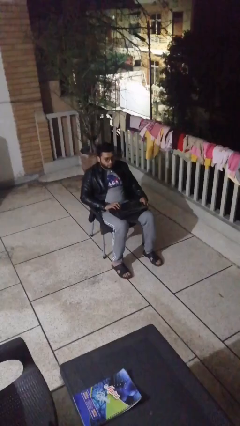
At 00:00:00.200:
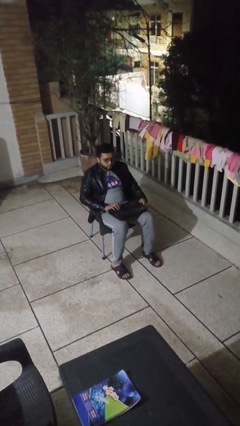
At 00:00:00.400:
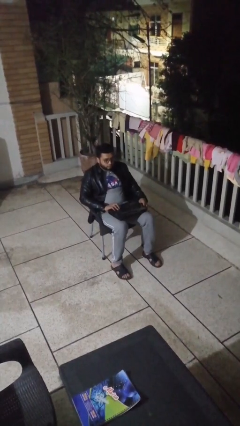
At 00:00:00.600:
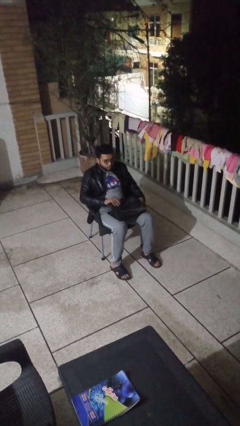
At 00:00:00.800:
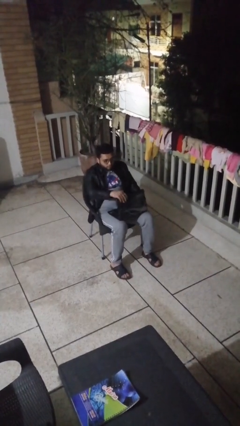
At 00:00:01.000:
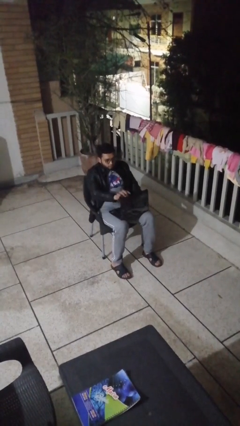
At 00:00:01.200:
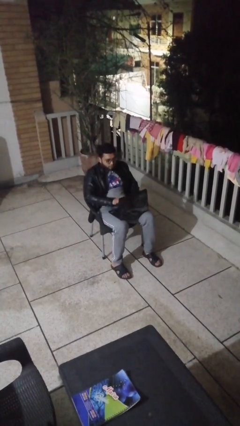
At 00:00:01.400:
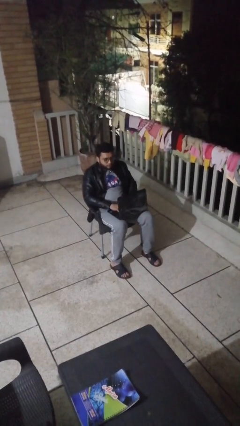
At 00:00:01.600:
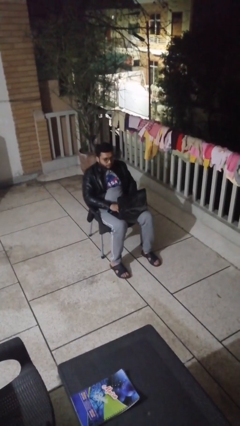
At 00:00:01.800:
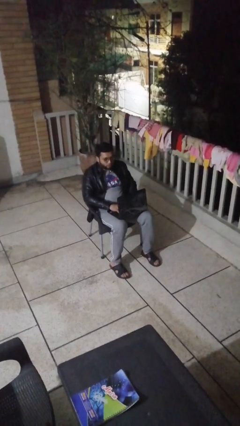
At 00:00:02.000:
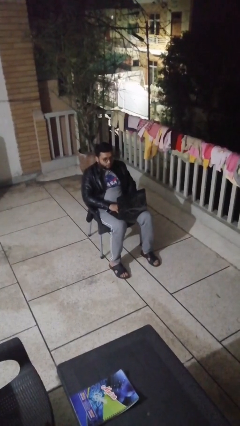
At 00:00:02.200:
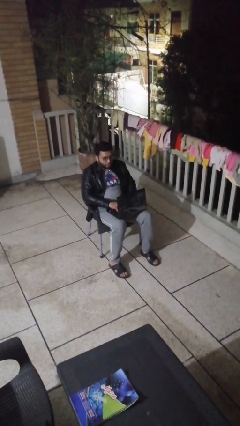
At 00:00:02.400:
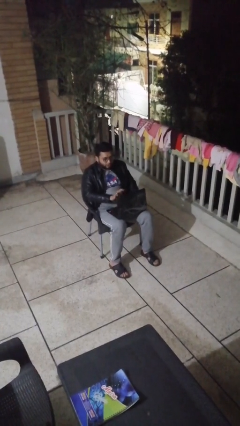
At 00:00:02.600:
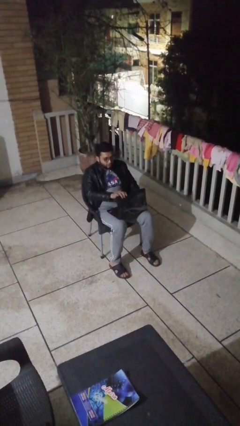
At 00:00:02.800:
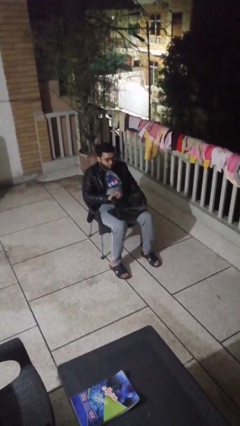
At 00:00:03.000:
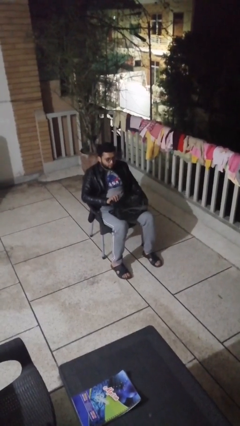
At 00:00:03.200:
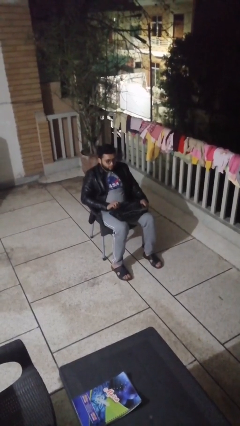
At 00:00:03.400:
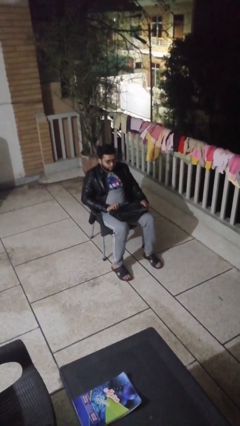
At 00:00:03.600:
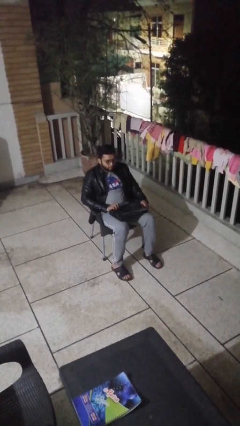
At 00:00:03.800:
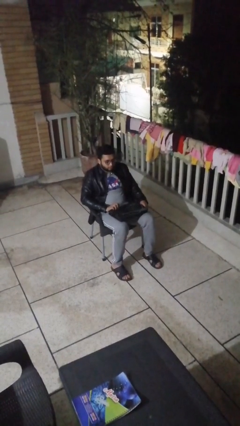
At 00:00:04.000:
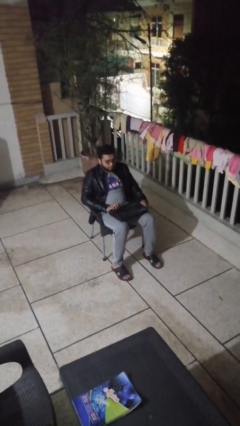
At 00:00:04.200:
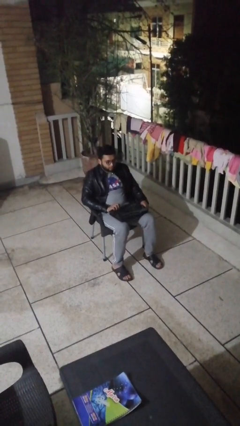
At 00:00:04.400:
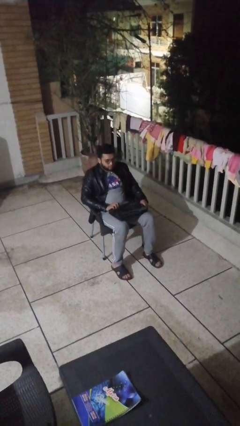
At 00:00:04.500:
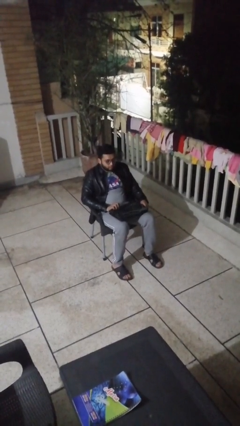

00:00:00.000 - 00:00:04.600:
person interacts with laptop

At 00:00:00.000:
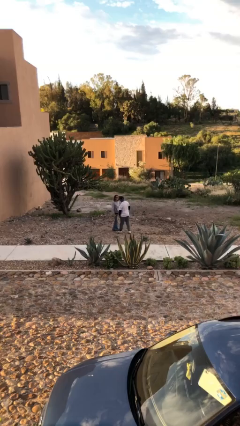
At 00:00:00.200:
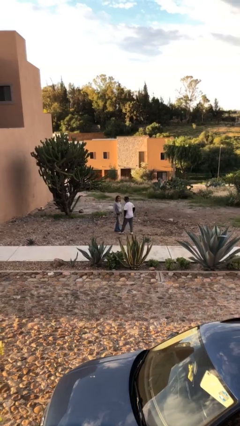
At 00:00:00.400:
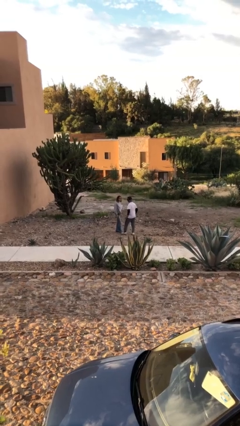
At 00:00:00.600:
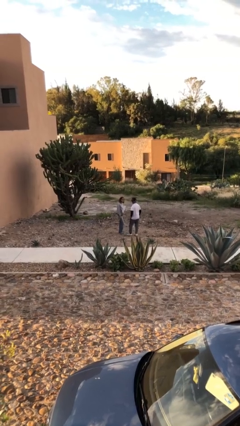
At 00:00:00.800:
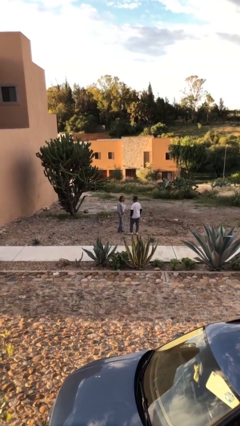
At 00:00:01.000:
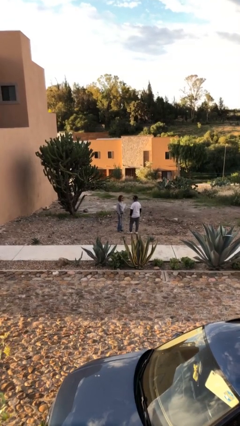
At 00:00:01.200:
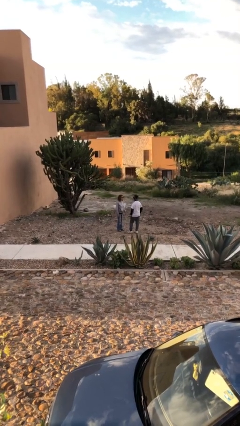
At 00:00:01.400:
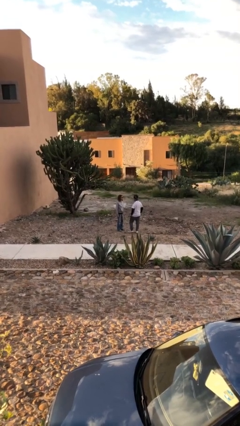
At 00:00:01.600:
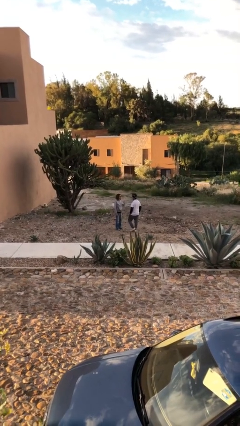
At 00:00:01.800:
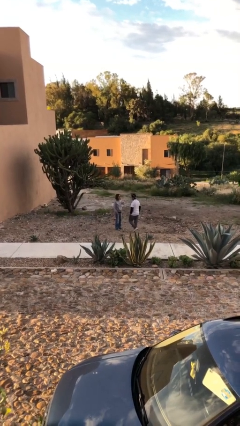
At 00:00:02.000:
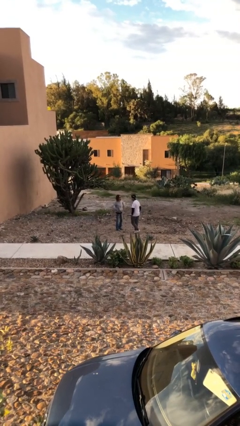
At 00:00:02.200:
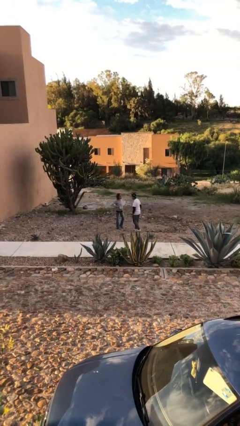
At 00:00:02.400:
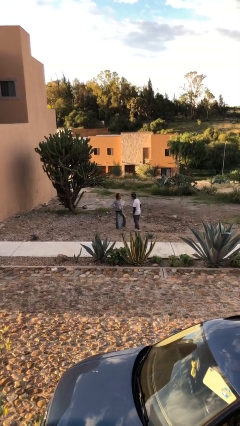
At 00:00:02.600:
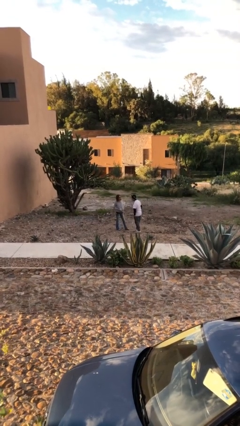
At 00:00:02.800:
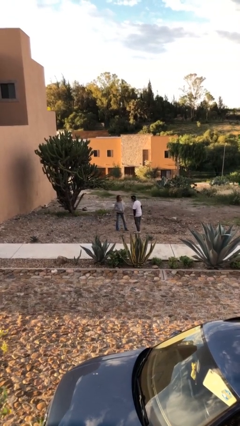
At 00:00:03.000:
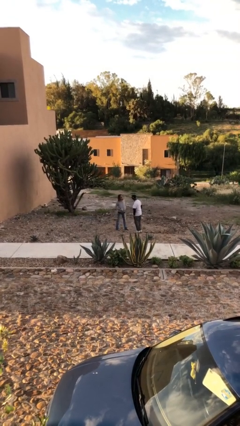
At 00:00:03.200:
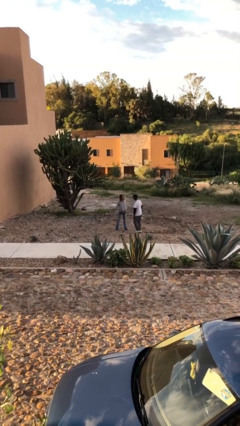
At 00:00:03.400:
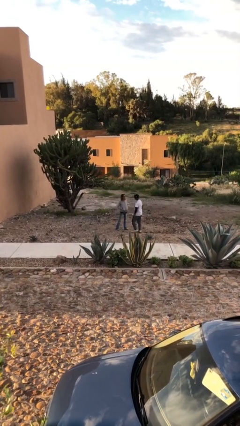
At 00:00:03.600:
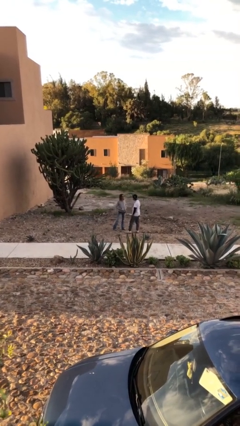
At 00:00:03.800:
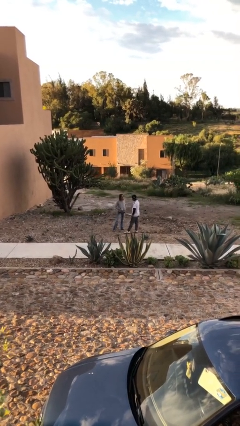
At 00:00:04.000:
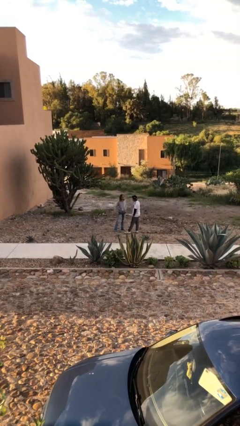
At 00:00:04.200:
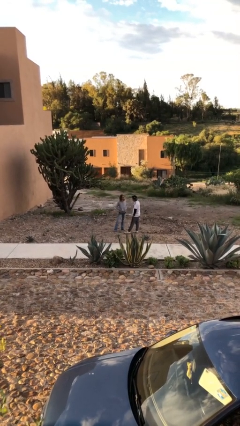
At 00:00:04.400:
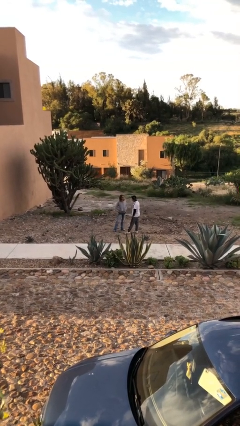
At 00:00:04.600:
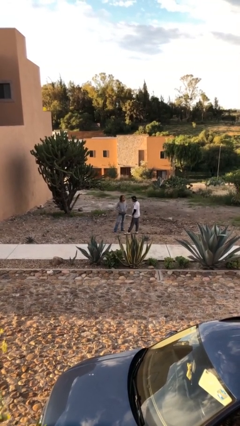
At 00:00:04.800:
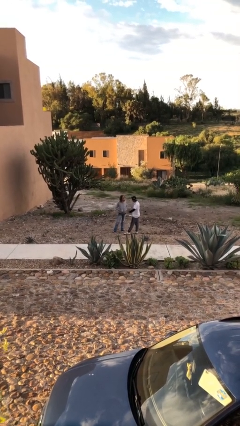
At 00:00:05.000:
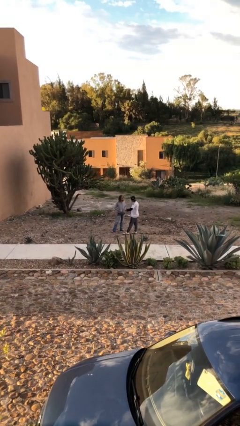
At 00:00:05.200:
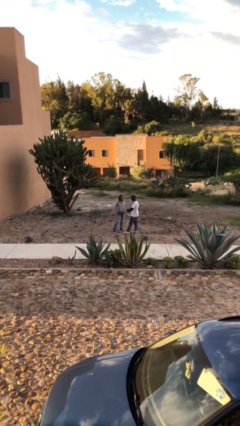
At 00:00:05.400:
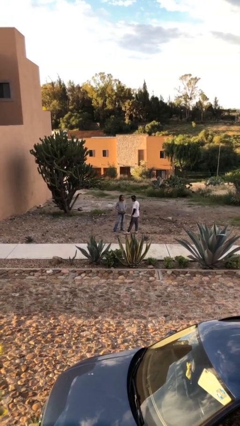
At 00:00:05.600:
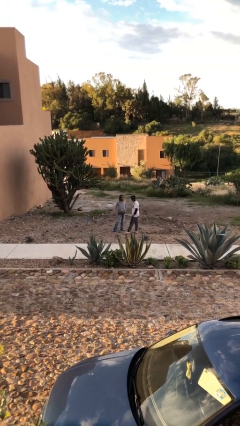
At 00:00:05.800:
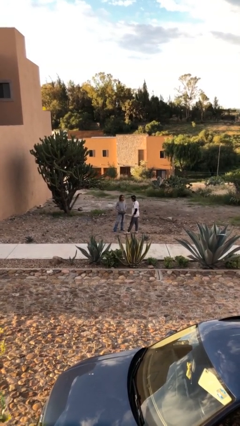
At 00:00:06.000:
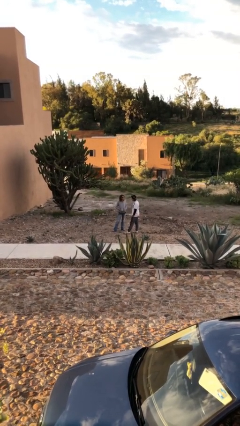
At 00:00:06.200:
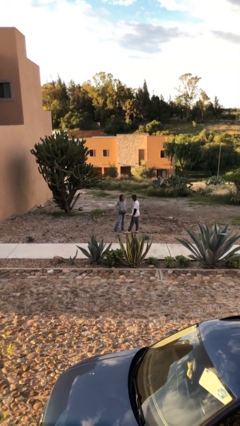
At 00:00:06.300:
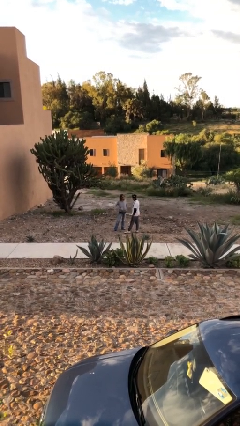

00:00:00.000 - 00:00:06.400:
person talks to person

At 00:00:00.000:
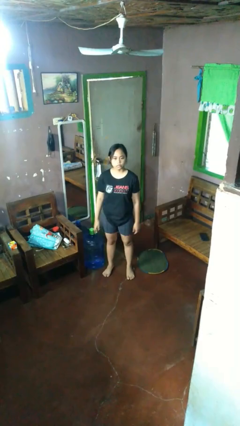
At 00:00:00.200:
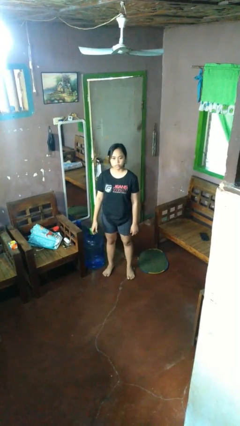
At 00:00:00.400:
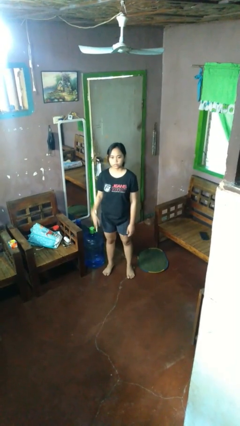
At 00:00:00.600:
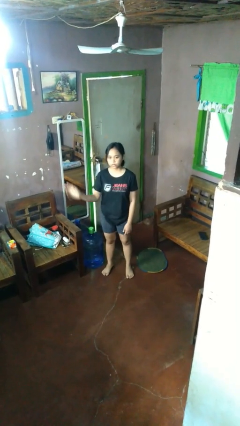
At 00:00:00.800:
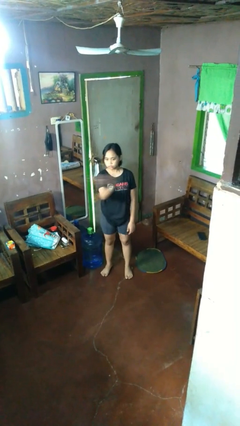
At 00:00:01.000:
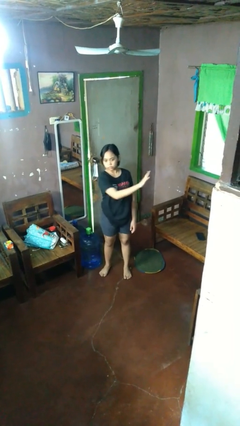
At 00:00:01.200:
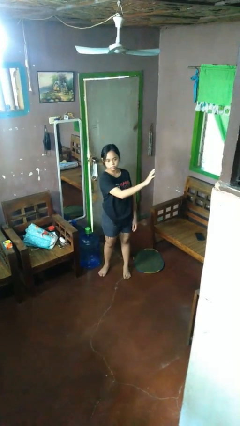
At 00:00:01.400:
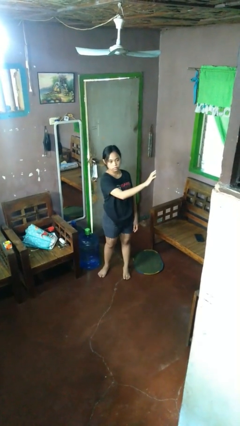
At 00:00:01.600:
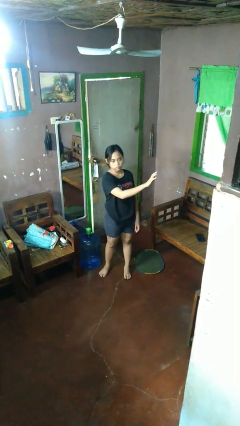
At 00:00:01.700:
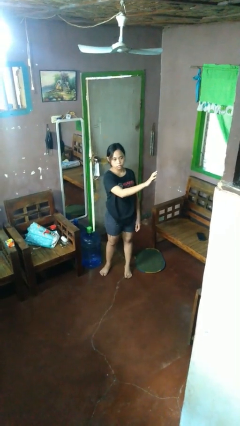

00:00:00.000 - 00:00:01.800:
person gestures swipe left

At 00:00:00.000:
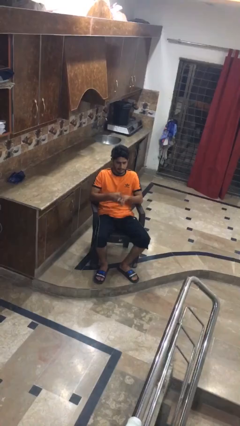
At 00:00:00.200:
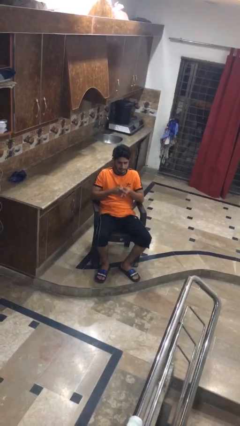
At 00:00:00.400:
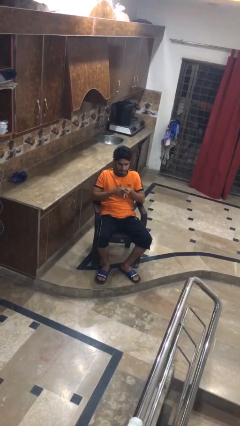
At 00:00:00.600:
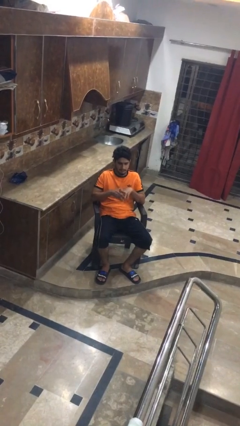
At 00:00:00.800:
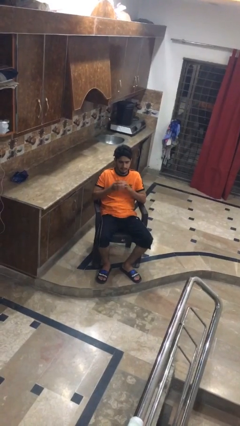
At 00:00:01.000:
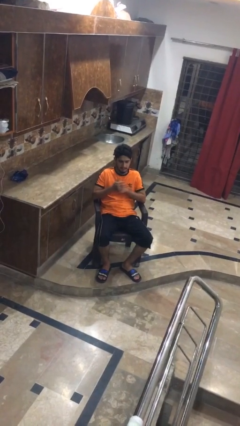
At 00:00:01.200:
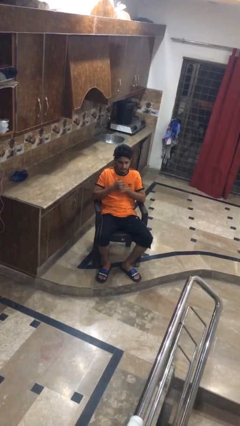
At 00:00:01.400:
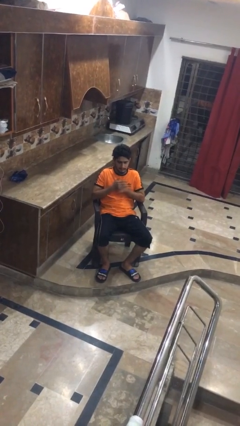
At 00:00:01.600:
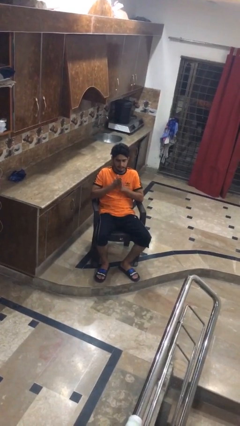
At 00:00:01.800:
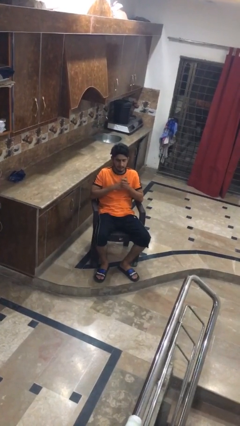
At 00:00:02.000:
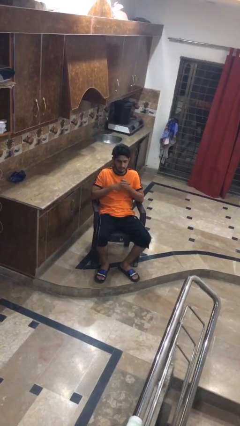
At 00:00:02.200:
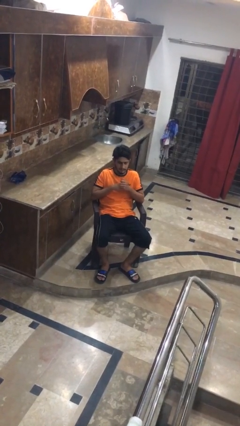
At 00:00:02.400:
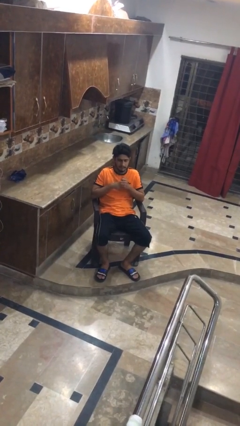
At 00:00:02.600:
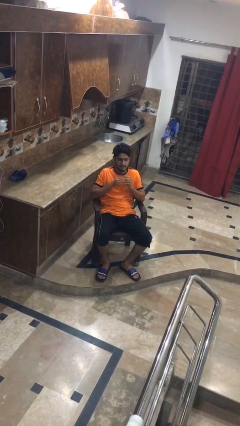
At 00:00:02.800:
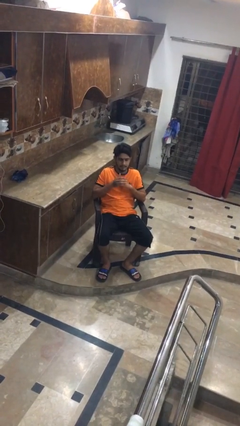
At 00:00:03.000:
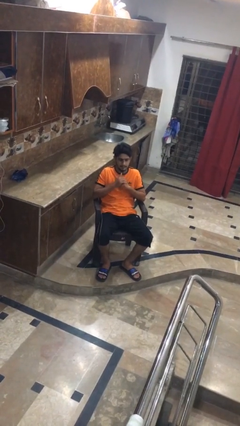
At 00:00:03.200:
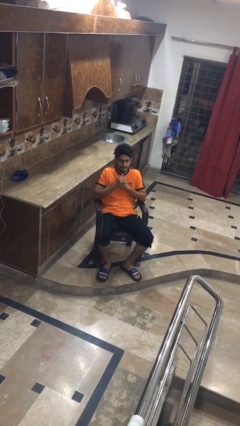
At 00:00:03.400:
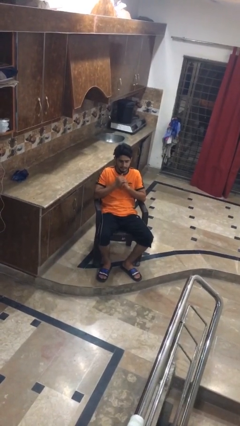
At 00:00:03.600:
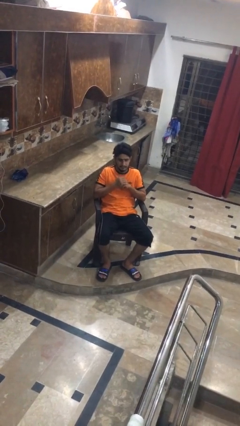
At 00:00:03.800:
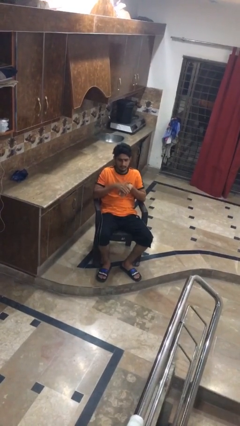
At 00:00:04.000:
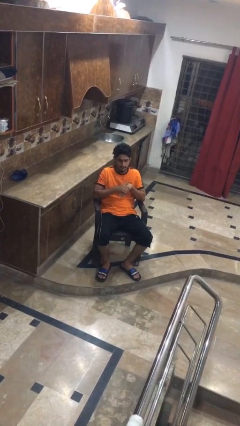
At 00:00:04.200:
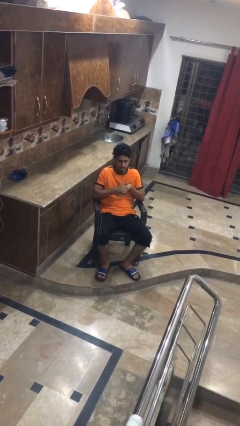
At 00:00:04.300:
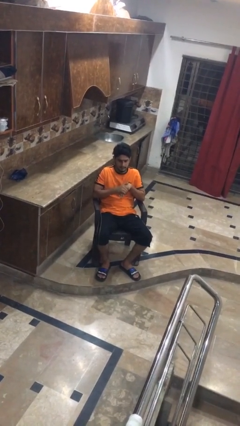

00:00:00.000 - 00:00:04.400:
person cracks knuckles

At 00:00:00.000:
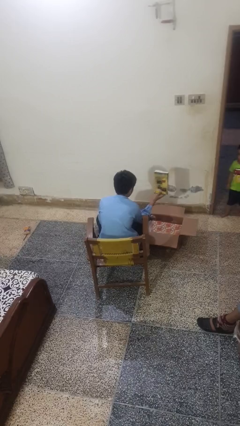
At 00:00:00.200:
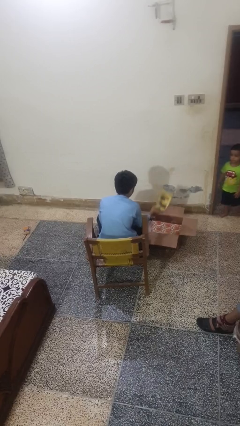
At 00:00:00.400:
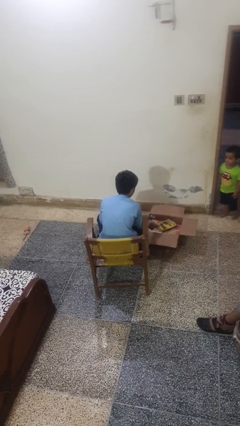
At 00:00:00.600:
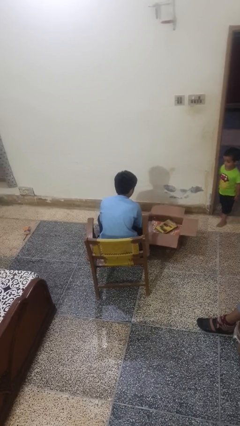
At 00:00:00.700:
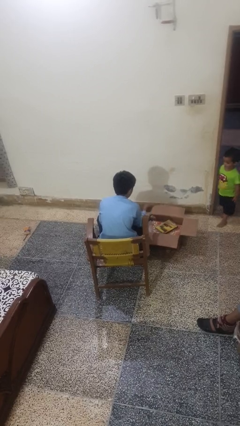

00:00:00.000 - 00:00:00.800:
person puts object into box
